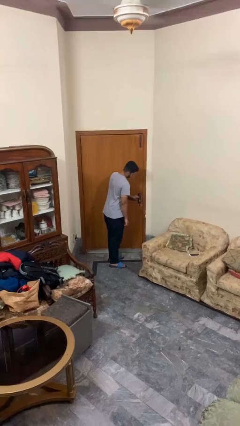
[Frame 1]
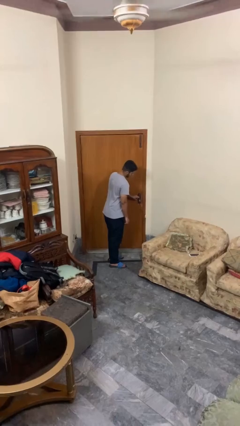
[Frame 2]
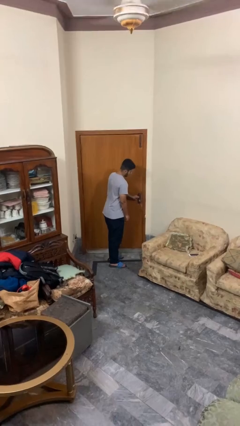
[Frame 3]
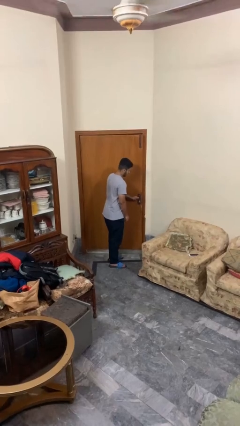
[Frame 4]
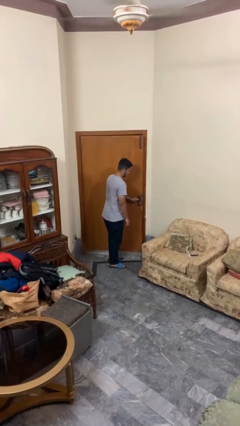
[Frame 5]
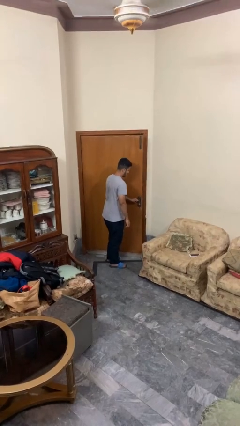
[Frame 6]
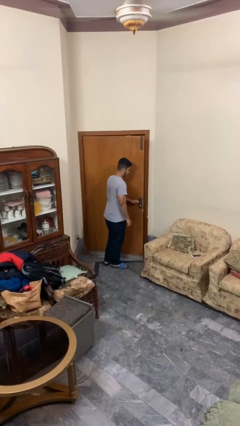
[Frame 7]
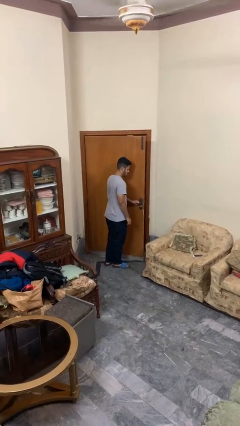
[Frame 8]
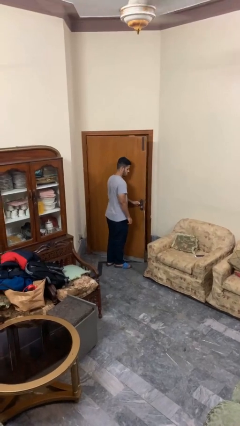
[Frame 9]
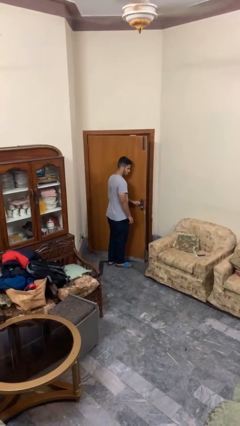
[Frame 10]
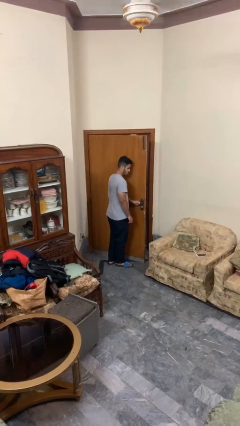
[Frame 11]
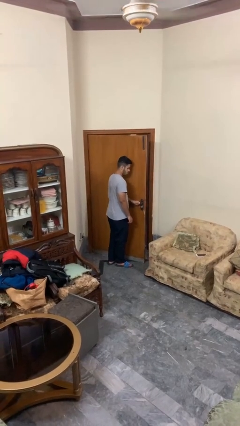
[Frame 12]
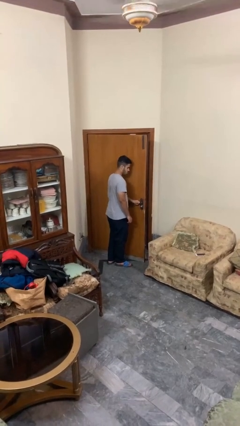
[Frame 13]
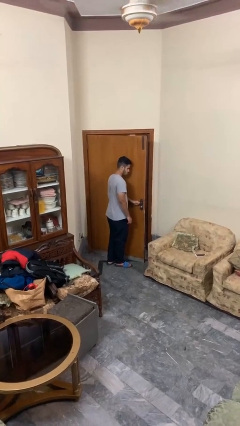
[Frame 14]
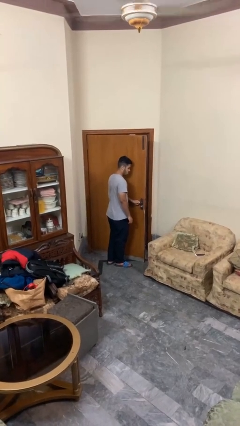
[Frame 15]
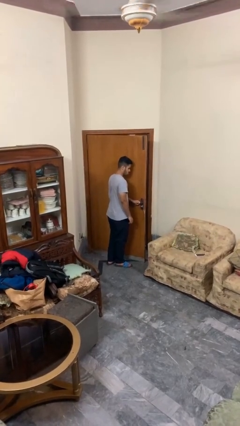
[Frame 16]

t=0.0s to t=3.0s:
person opens facility door

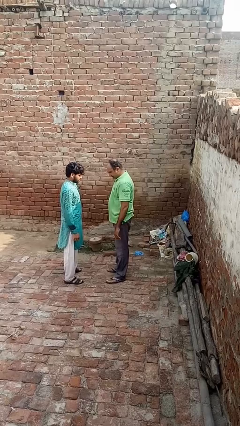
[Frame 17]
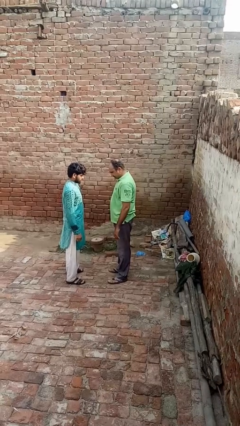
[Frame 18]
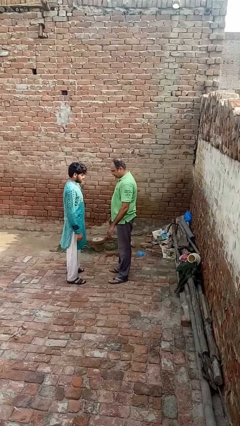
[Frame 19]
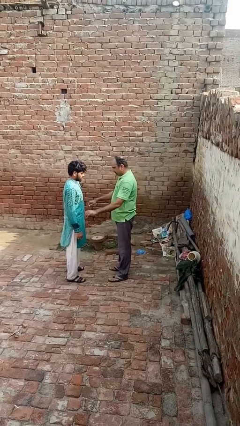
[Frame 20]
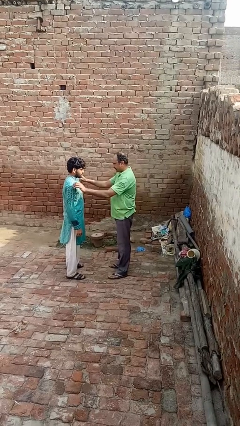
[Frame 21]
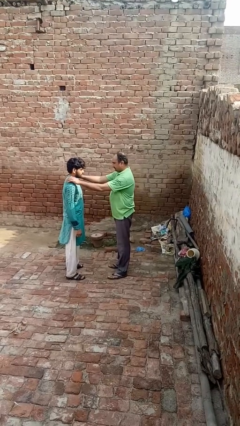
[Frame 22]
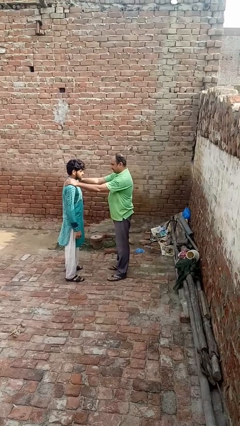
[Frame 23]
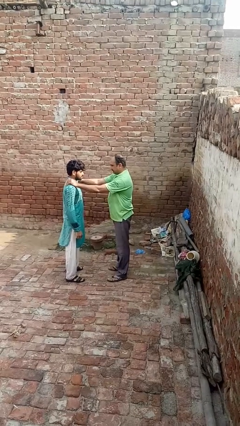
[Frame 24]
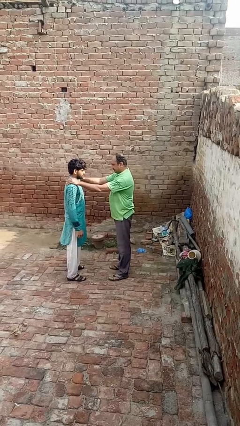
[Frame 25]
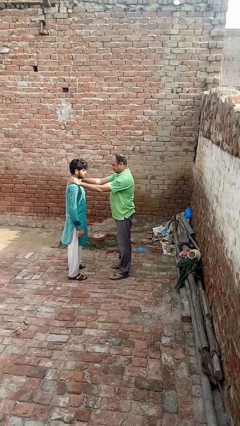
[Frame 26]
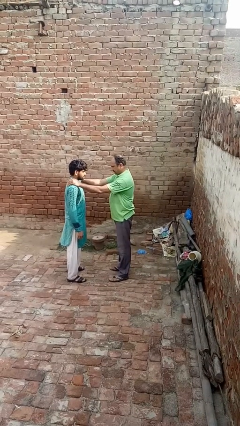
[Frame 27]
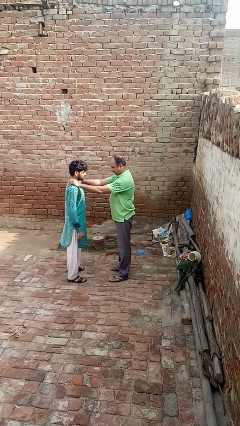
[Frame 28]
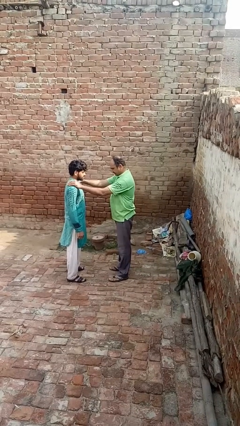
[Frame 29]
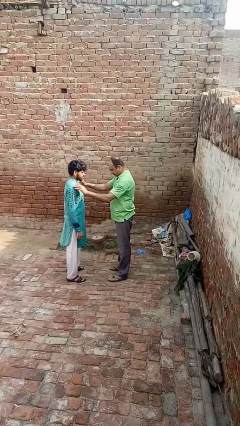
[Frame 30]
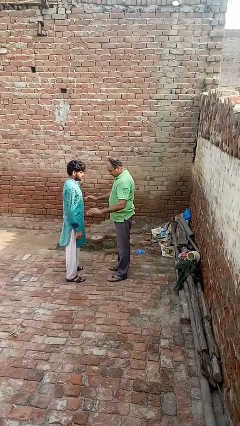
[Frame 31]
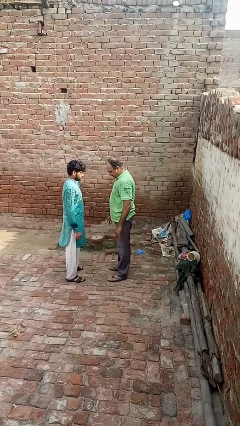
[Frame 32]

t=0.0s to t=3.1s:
person pounds shoulders of person

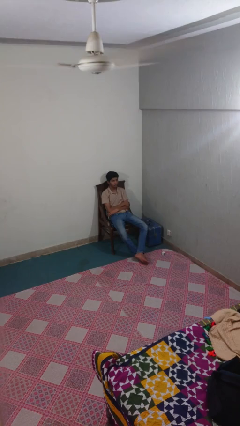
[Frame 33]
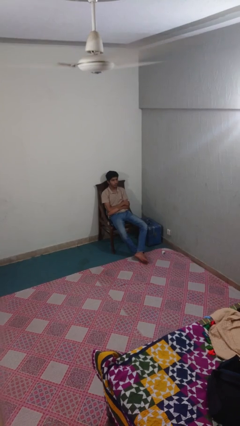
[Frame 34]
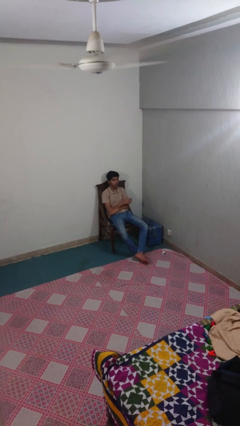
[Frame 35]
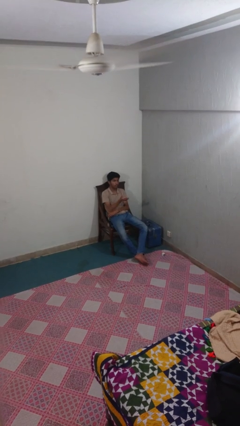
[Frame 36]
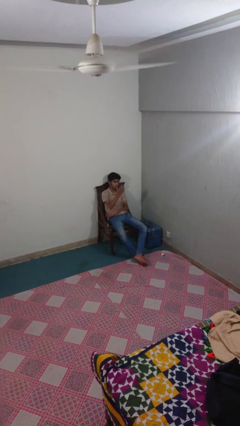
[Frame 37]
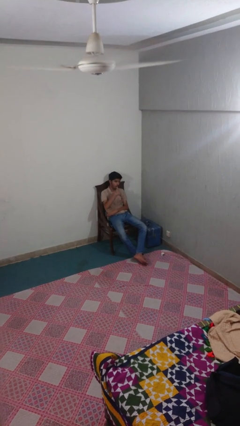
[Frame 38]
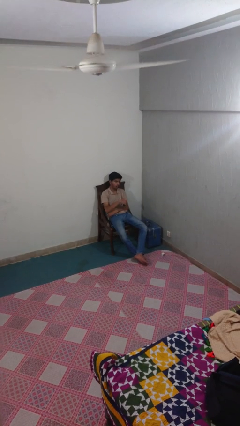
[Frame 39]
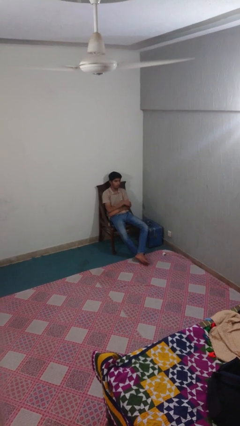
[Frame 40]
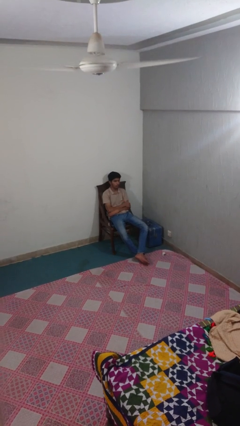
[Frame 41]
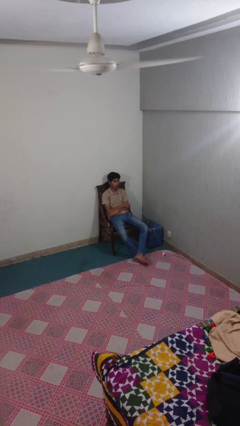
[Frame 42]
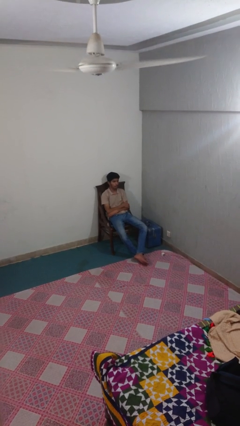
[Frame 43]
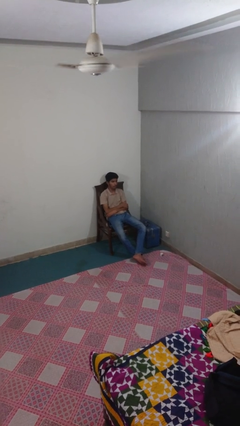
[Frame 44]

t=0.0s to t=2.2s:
person gestures come here

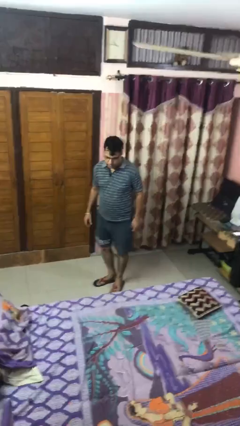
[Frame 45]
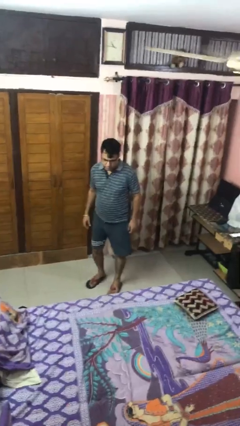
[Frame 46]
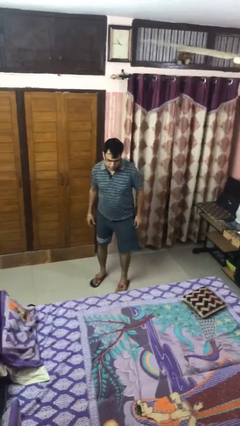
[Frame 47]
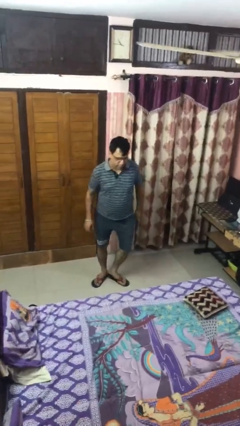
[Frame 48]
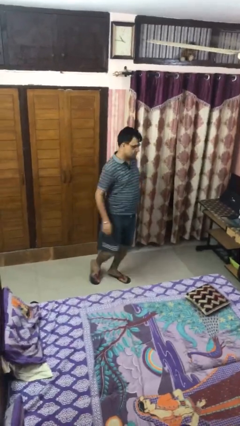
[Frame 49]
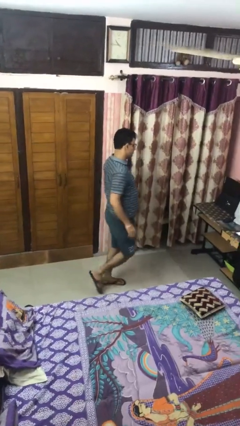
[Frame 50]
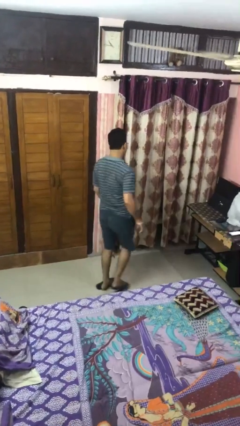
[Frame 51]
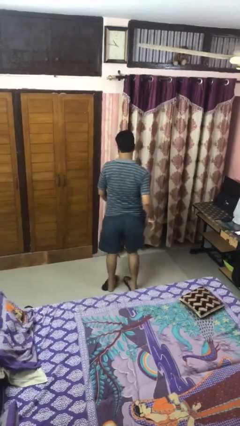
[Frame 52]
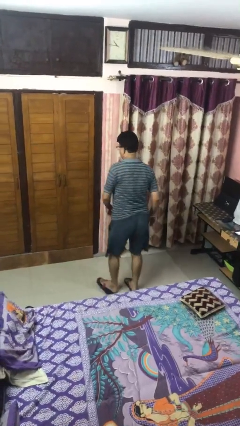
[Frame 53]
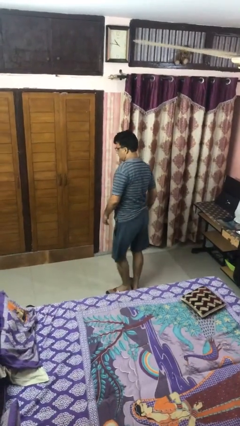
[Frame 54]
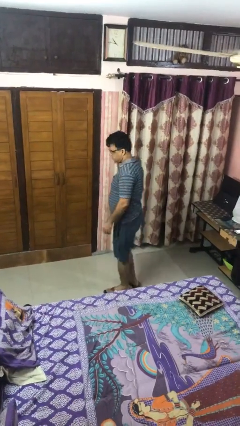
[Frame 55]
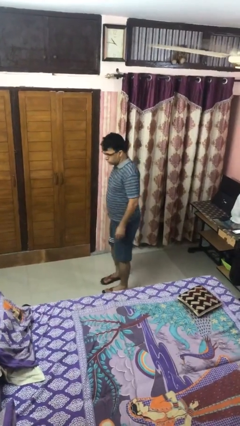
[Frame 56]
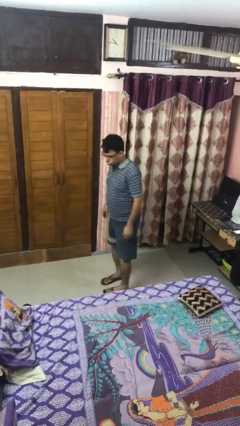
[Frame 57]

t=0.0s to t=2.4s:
person twirls

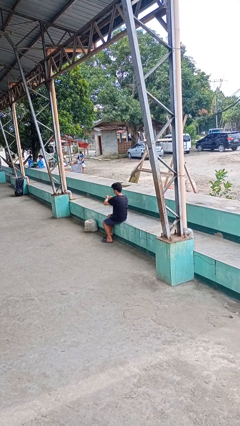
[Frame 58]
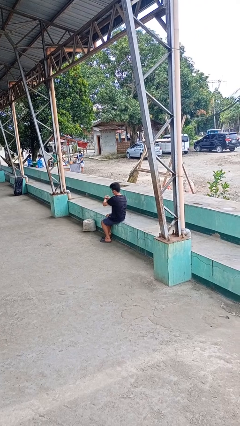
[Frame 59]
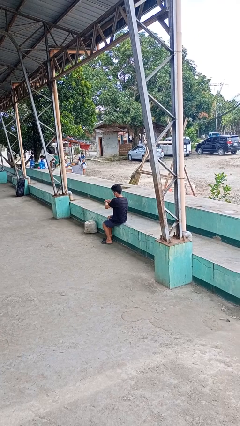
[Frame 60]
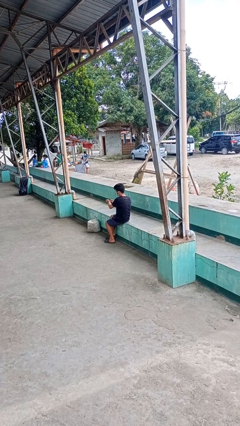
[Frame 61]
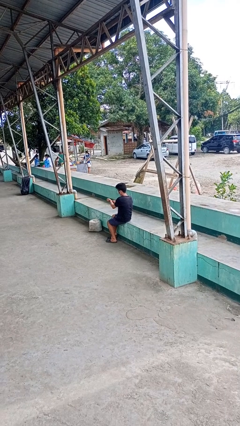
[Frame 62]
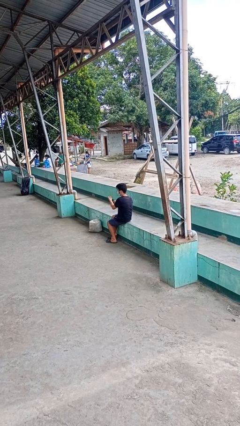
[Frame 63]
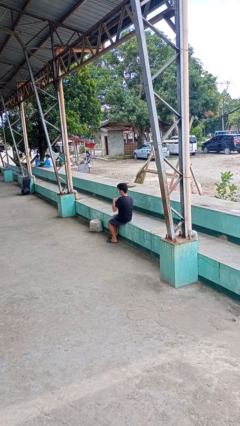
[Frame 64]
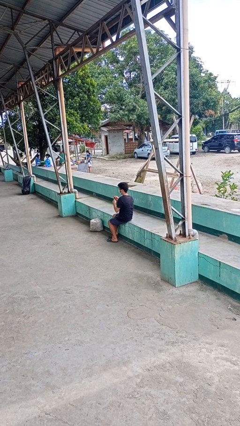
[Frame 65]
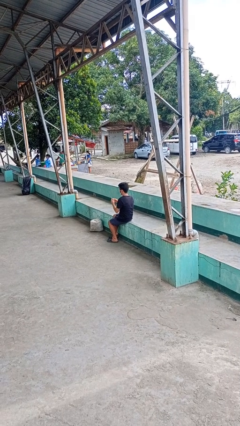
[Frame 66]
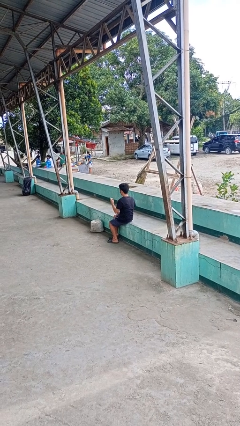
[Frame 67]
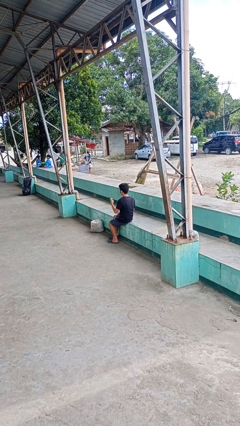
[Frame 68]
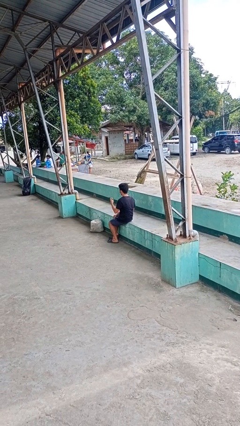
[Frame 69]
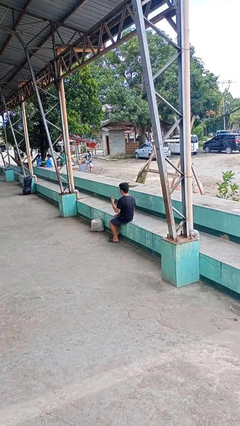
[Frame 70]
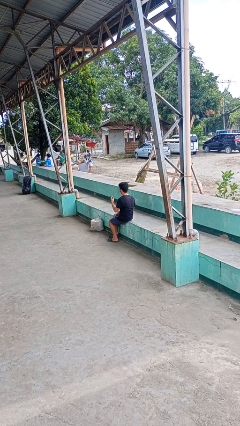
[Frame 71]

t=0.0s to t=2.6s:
person takes off wristwatch

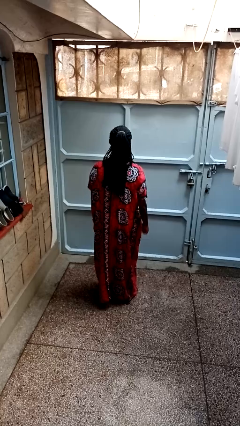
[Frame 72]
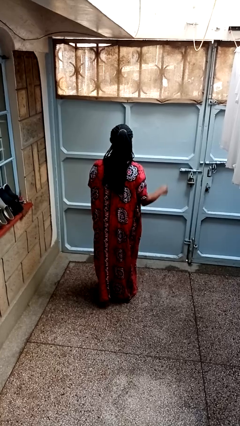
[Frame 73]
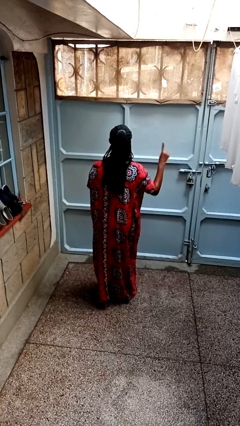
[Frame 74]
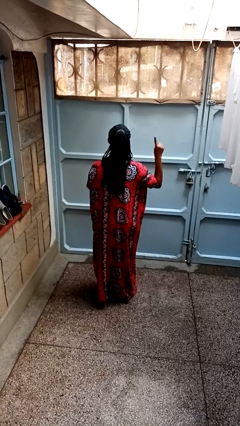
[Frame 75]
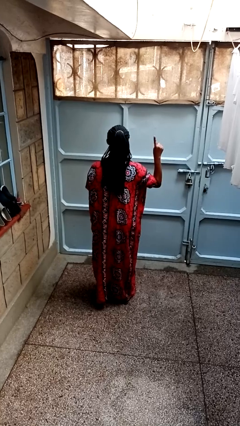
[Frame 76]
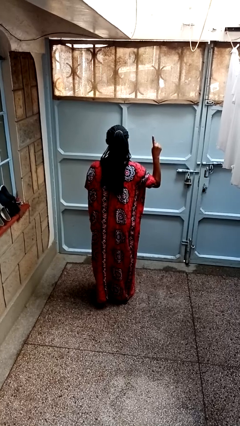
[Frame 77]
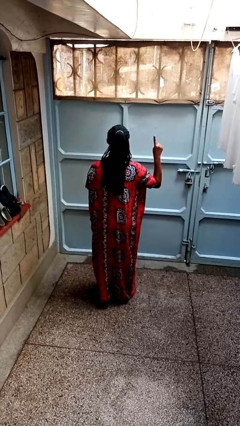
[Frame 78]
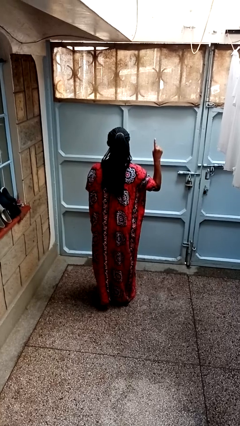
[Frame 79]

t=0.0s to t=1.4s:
person gestures number one

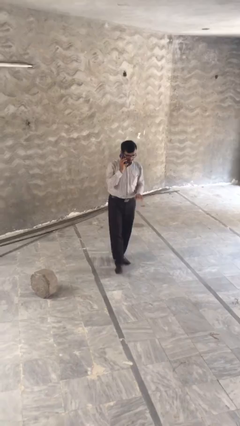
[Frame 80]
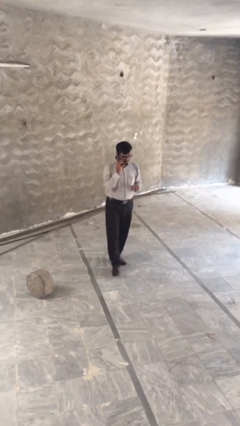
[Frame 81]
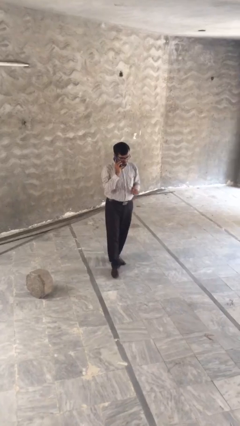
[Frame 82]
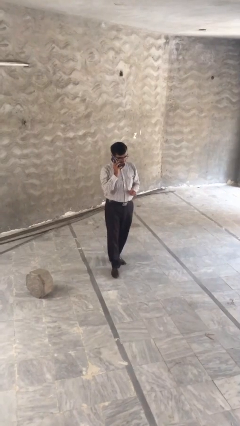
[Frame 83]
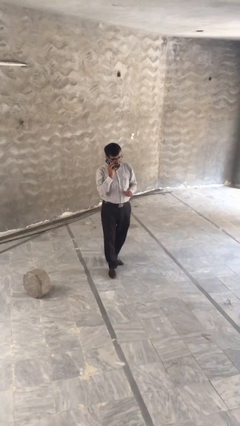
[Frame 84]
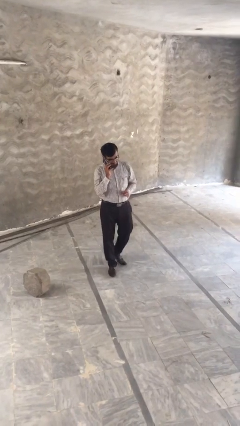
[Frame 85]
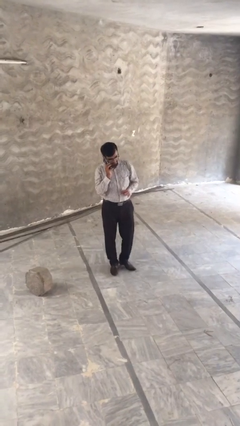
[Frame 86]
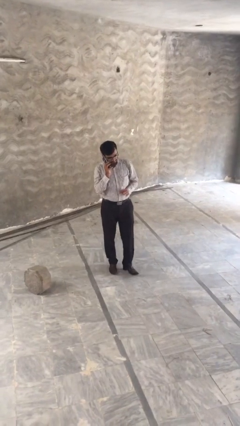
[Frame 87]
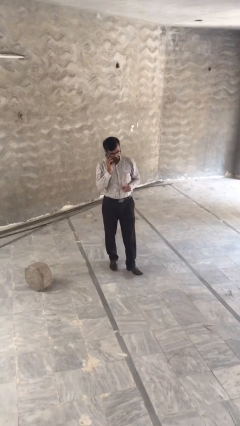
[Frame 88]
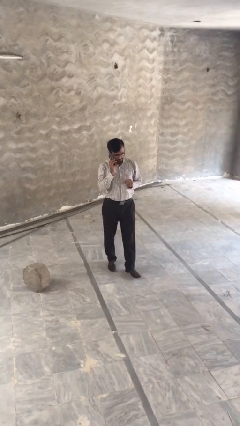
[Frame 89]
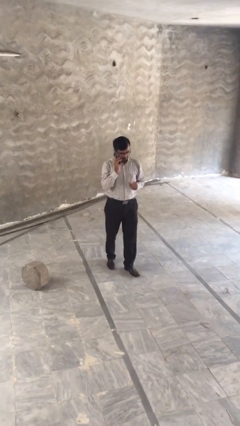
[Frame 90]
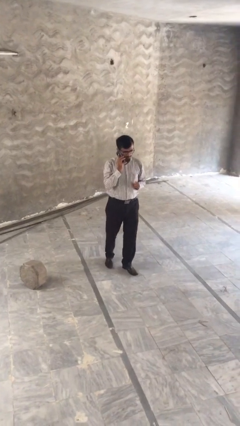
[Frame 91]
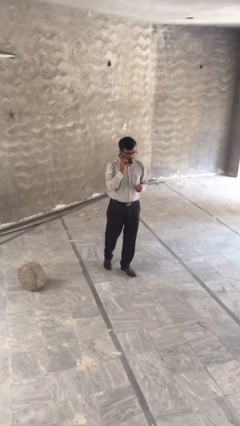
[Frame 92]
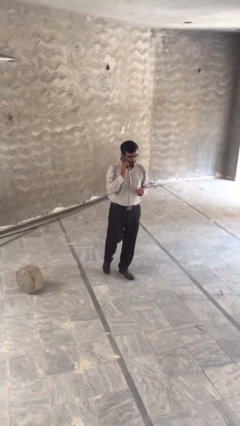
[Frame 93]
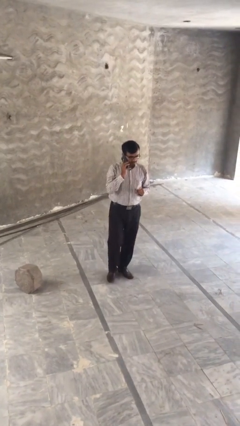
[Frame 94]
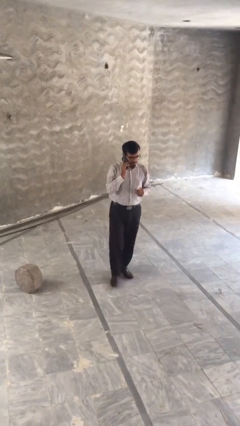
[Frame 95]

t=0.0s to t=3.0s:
person talks on phone
